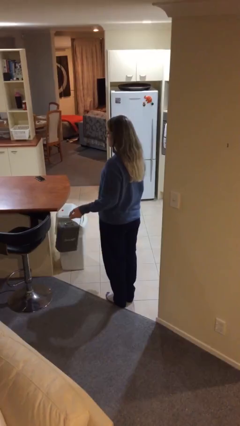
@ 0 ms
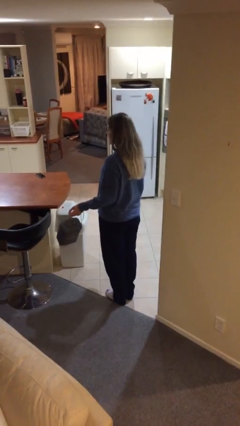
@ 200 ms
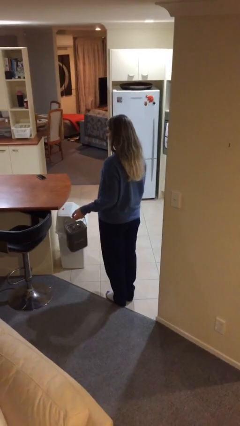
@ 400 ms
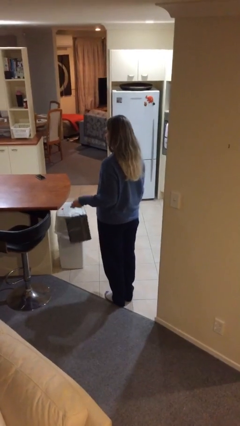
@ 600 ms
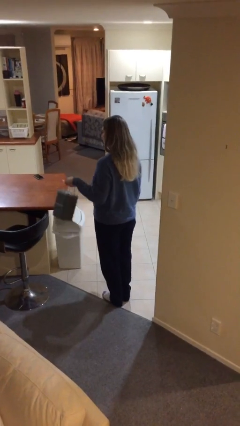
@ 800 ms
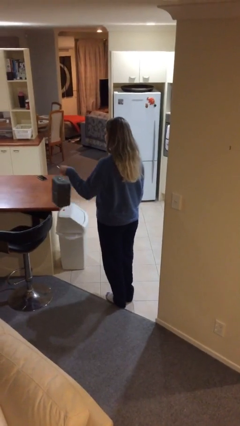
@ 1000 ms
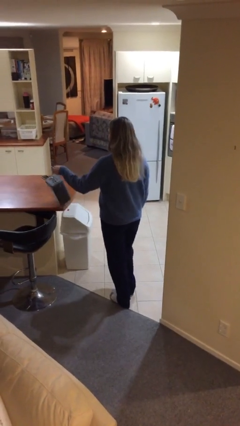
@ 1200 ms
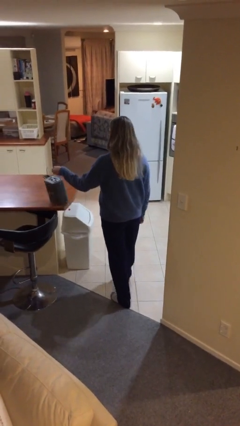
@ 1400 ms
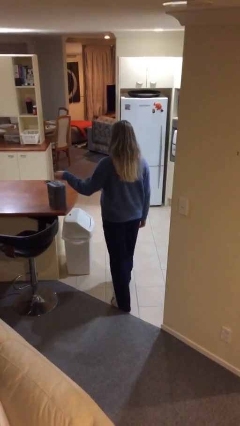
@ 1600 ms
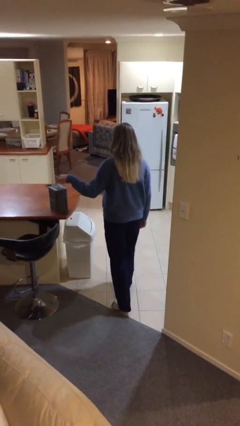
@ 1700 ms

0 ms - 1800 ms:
person puts down object on table

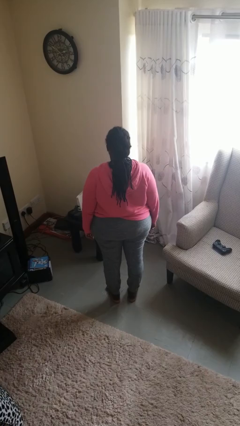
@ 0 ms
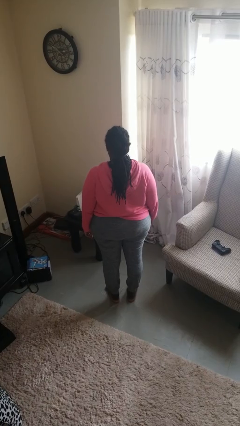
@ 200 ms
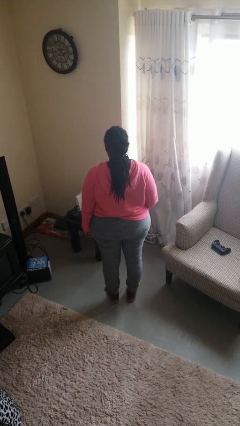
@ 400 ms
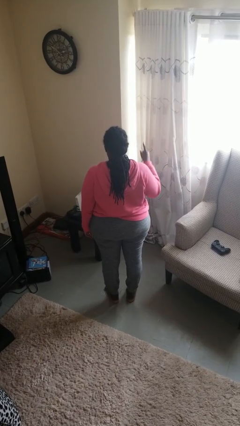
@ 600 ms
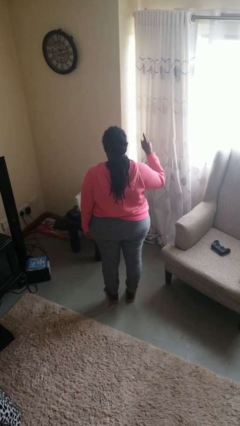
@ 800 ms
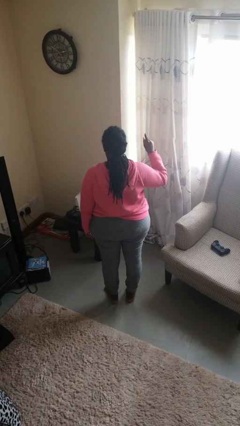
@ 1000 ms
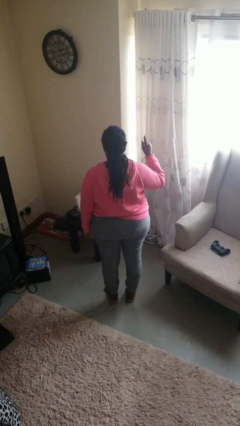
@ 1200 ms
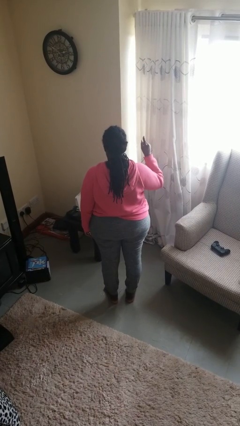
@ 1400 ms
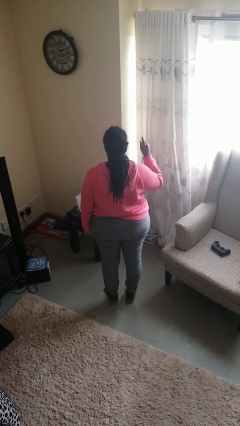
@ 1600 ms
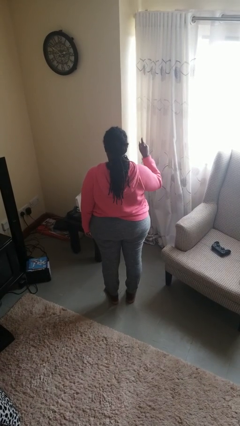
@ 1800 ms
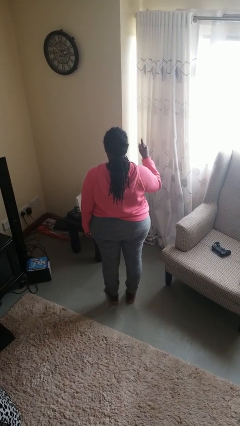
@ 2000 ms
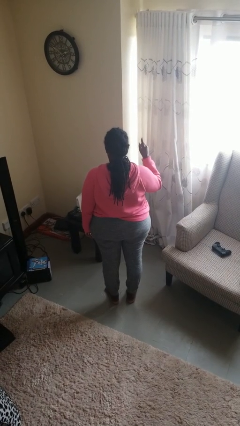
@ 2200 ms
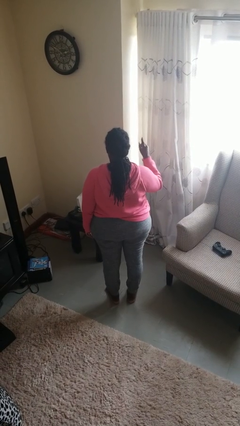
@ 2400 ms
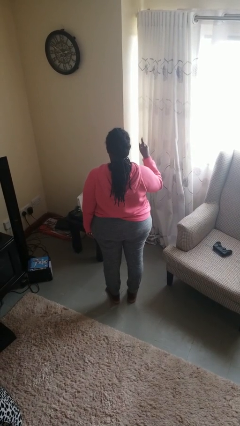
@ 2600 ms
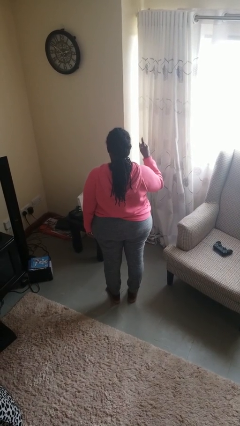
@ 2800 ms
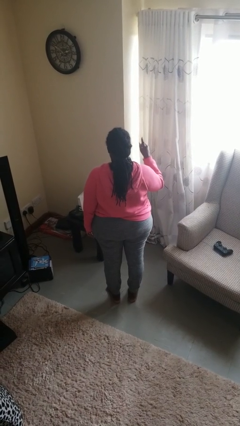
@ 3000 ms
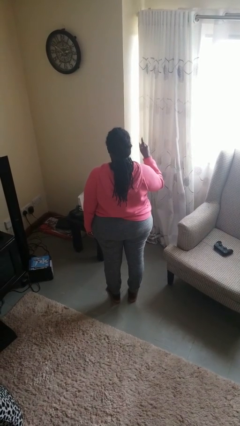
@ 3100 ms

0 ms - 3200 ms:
person gestures number one

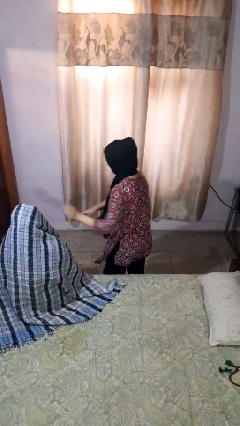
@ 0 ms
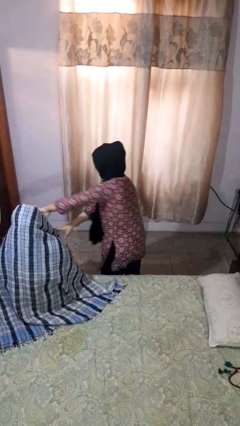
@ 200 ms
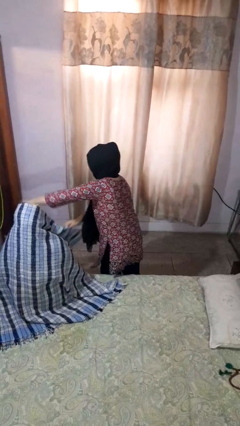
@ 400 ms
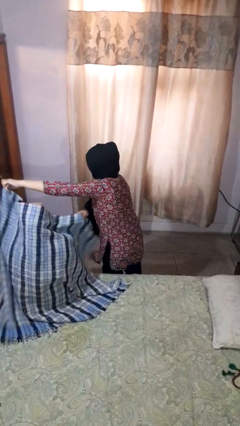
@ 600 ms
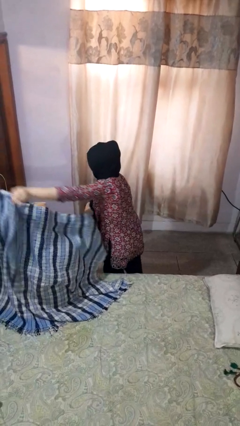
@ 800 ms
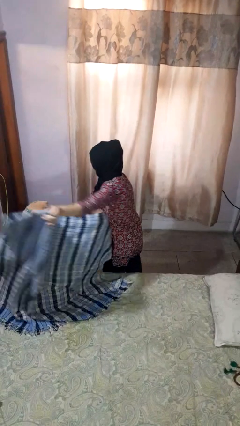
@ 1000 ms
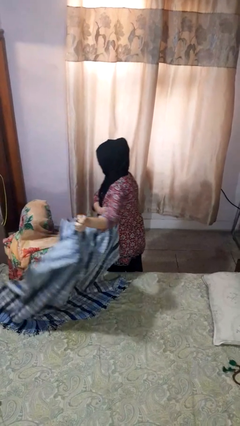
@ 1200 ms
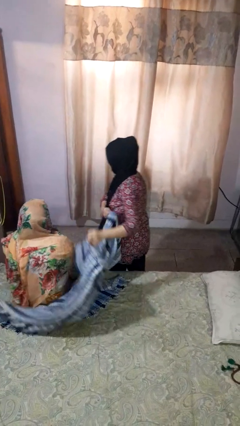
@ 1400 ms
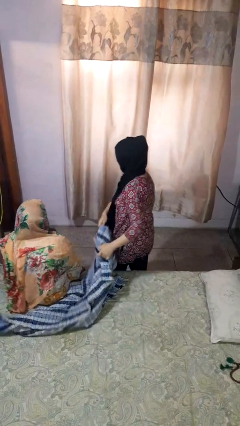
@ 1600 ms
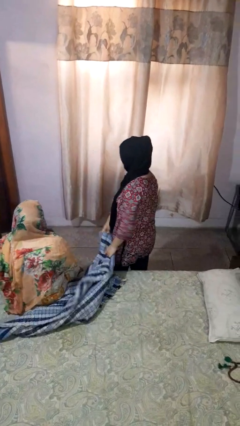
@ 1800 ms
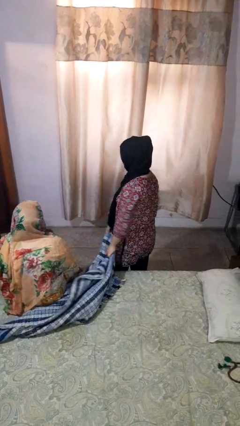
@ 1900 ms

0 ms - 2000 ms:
person uncovers friend with blanket

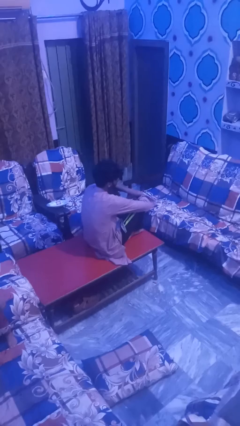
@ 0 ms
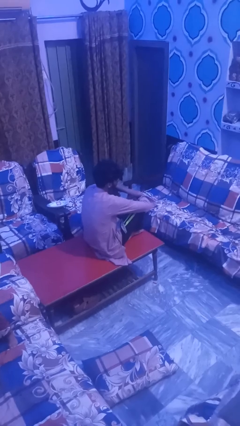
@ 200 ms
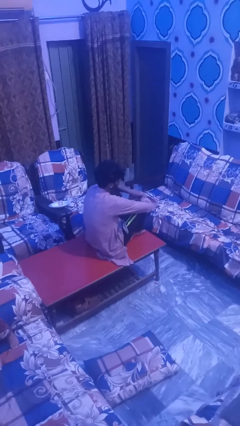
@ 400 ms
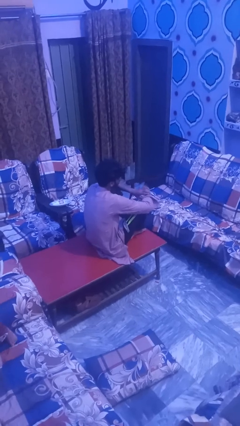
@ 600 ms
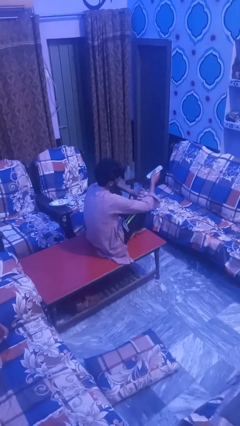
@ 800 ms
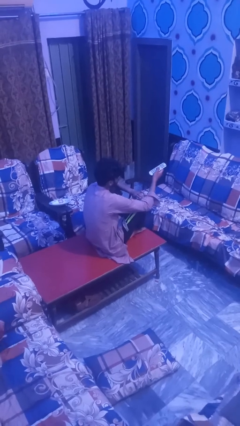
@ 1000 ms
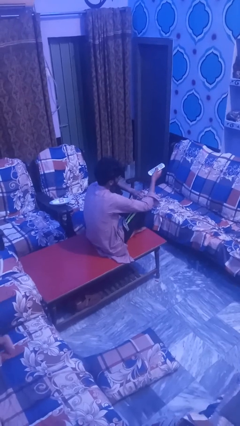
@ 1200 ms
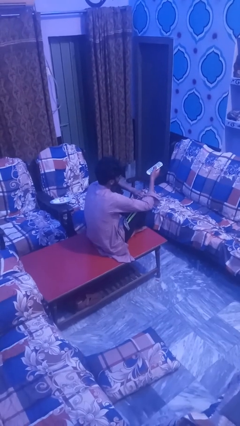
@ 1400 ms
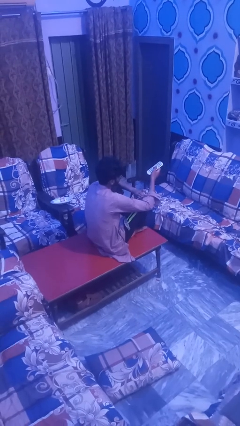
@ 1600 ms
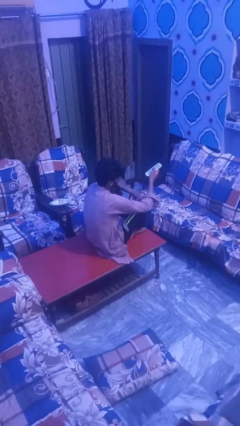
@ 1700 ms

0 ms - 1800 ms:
person uses television remote

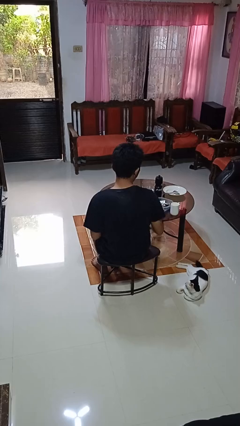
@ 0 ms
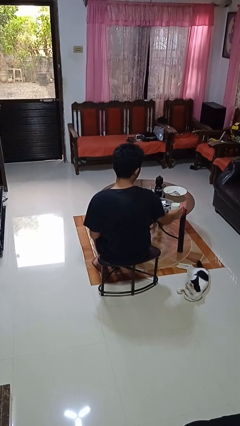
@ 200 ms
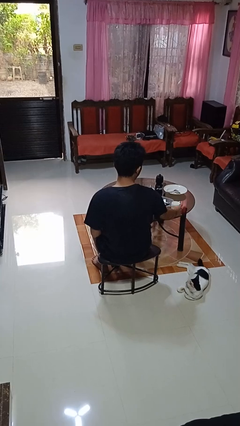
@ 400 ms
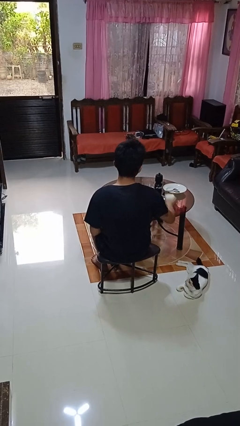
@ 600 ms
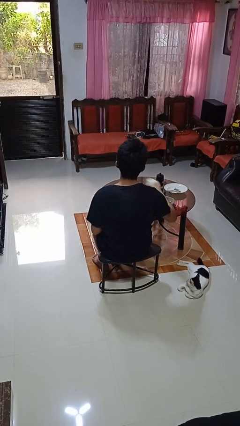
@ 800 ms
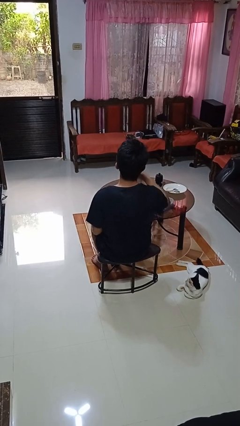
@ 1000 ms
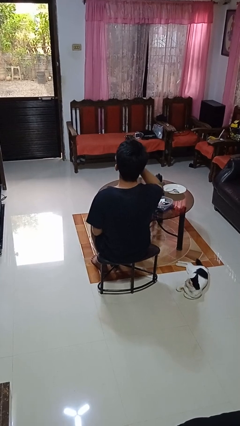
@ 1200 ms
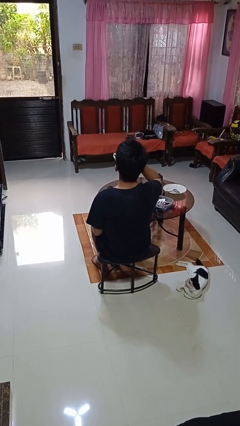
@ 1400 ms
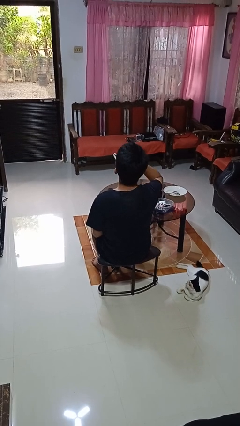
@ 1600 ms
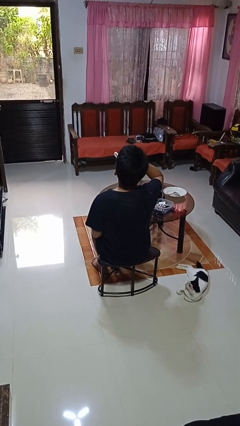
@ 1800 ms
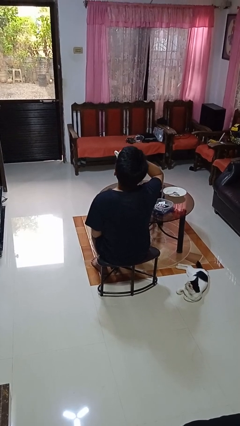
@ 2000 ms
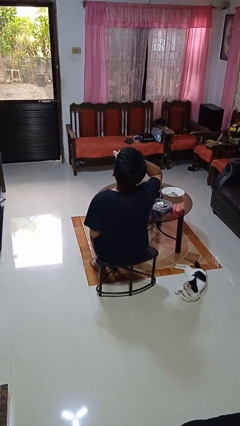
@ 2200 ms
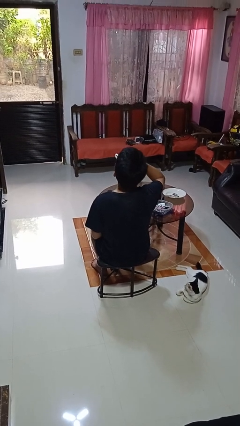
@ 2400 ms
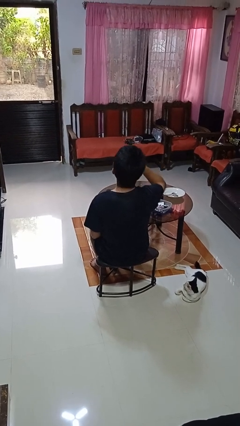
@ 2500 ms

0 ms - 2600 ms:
person drinks from cup

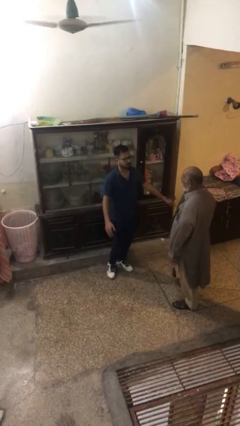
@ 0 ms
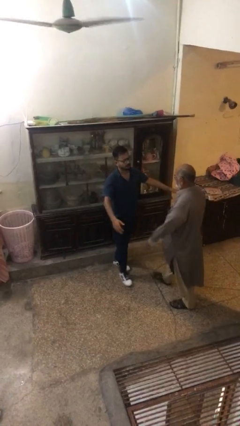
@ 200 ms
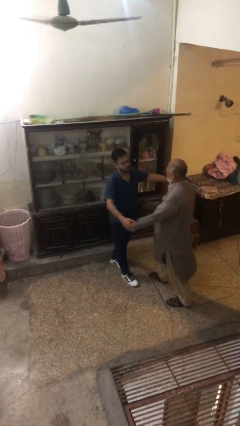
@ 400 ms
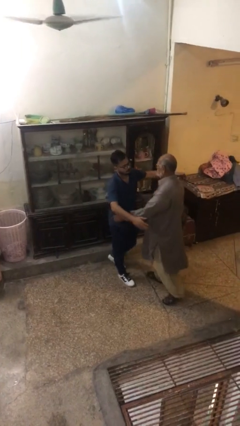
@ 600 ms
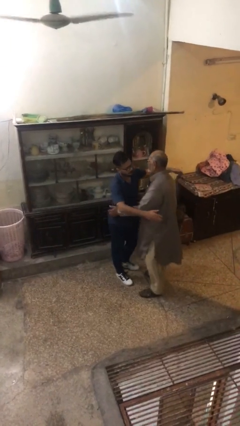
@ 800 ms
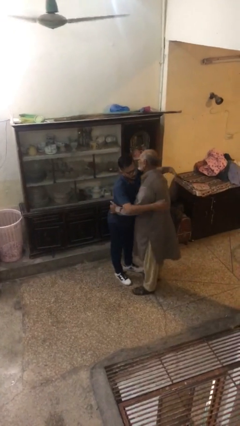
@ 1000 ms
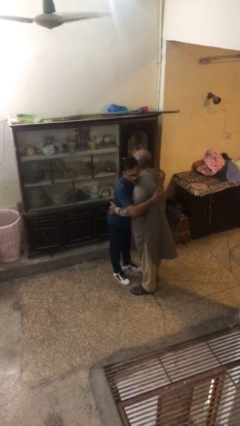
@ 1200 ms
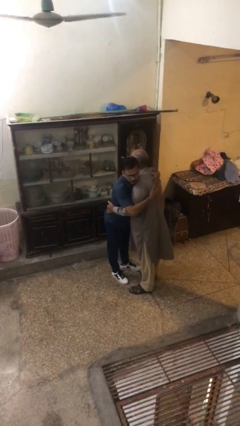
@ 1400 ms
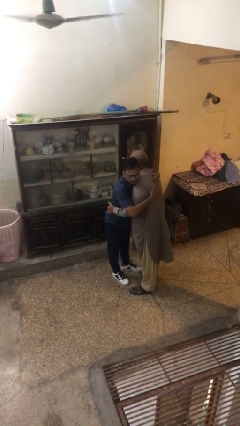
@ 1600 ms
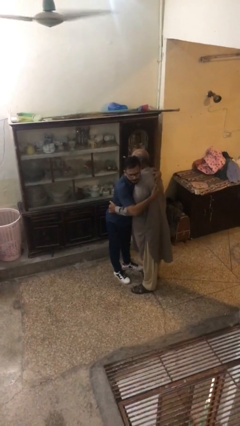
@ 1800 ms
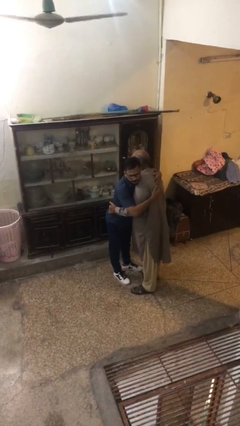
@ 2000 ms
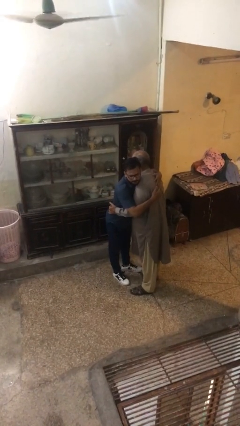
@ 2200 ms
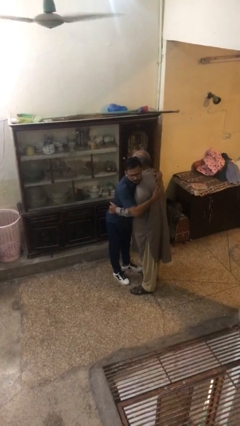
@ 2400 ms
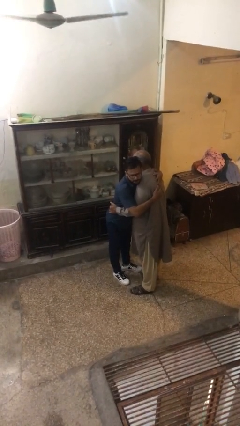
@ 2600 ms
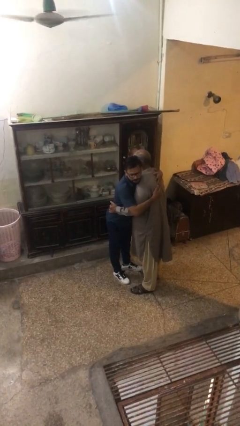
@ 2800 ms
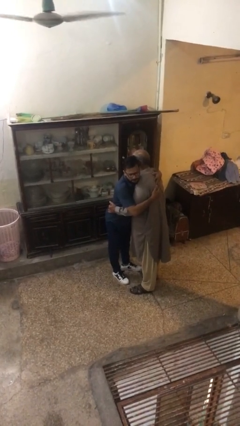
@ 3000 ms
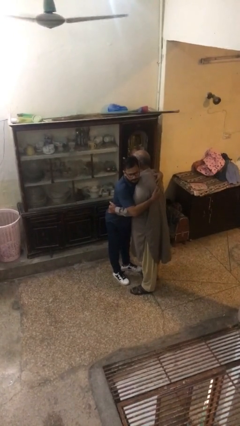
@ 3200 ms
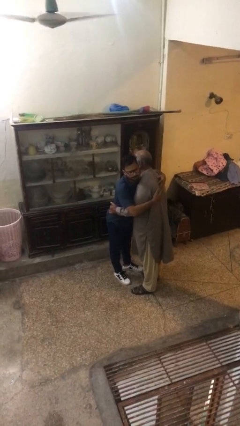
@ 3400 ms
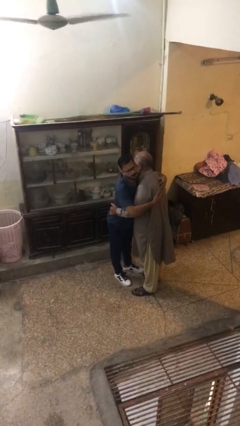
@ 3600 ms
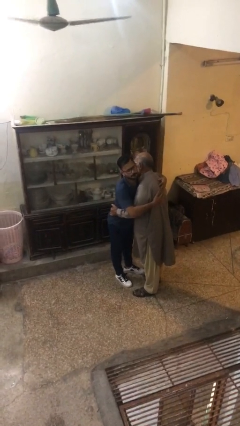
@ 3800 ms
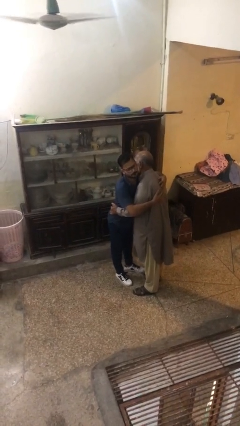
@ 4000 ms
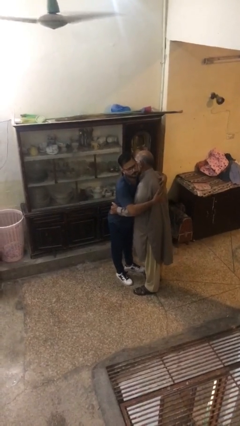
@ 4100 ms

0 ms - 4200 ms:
person embraces person

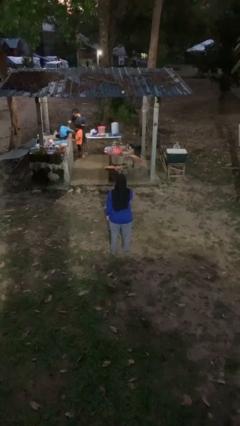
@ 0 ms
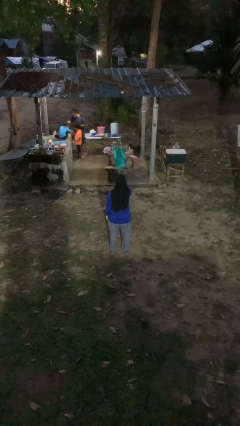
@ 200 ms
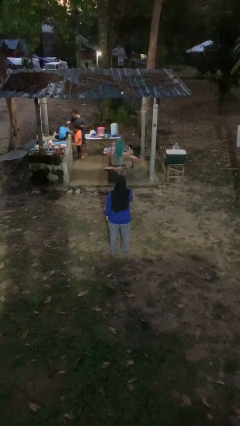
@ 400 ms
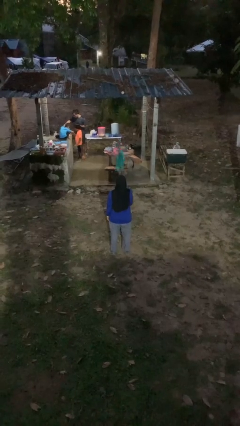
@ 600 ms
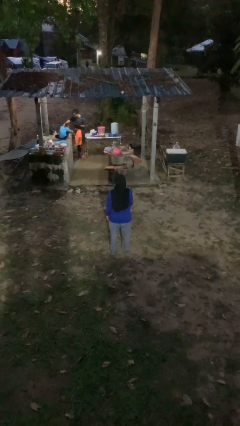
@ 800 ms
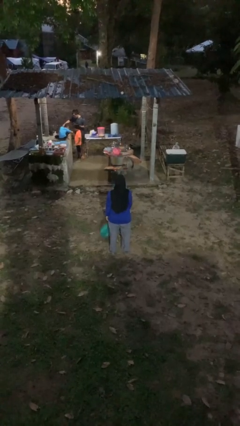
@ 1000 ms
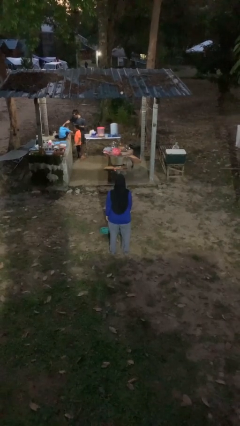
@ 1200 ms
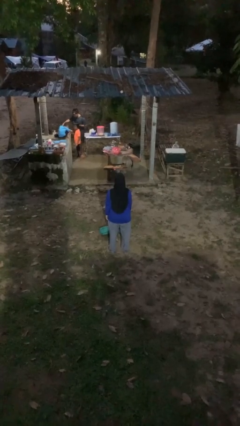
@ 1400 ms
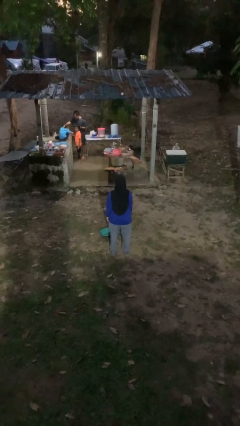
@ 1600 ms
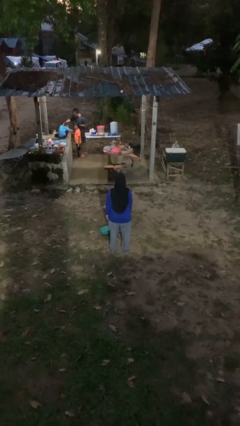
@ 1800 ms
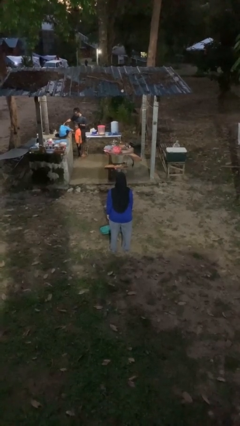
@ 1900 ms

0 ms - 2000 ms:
person throws object into air
